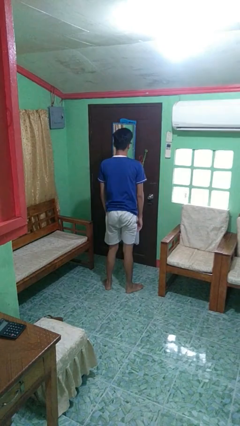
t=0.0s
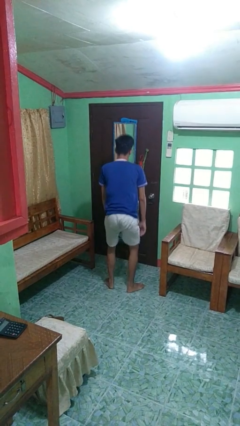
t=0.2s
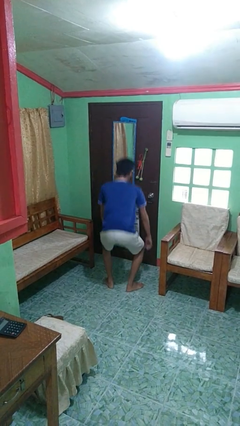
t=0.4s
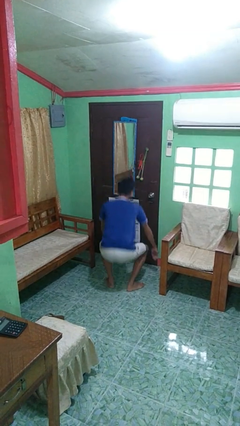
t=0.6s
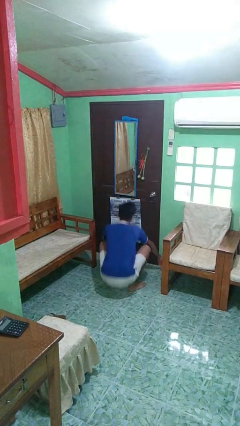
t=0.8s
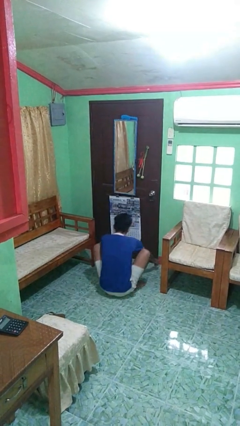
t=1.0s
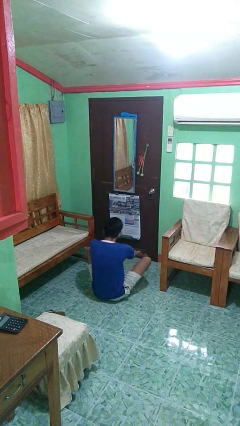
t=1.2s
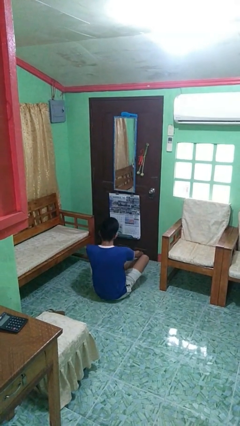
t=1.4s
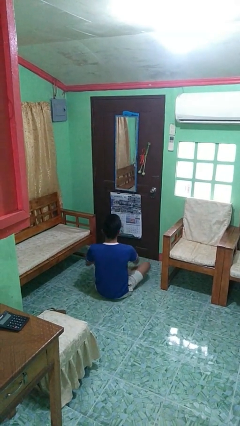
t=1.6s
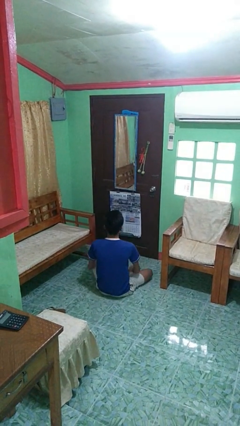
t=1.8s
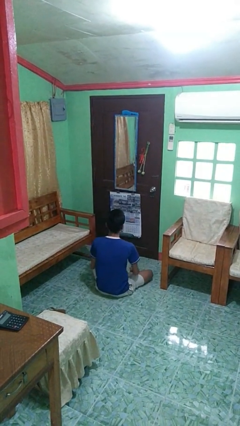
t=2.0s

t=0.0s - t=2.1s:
person sits crisscross

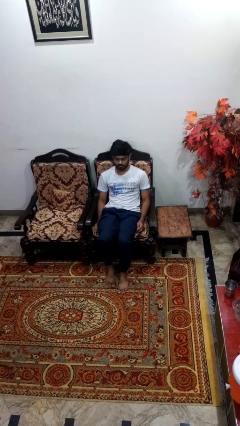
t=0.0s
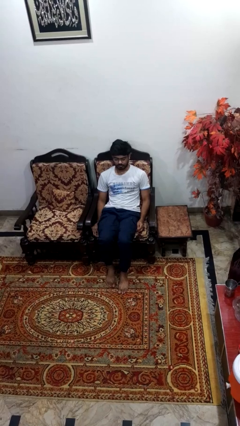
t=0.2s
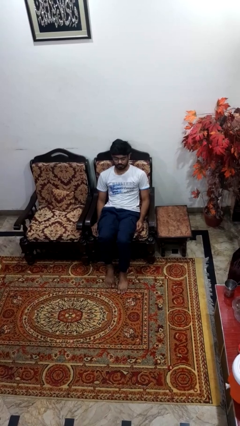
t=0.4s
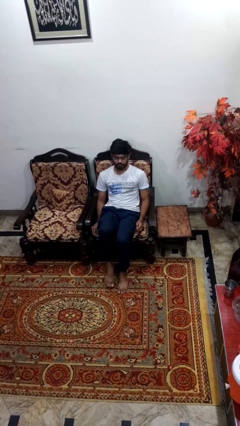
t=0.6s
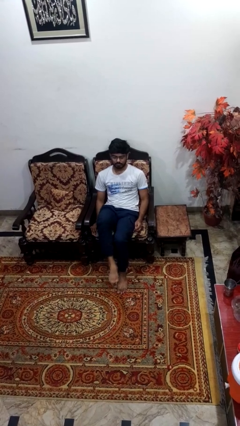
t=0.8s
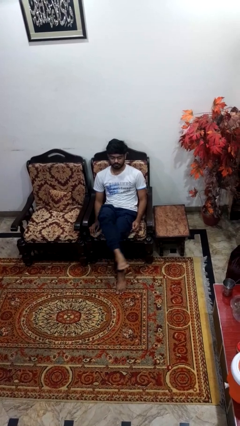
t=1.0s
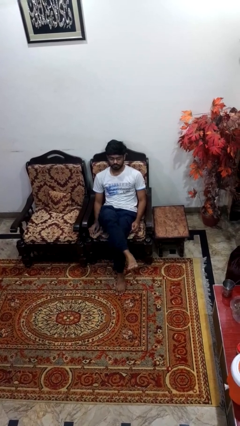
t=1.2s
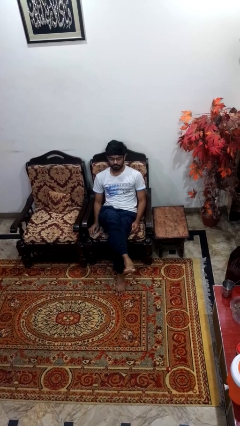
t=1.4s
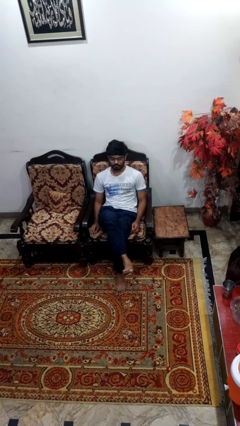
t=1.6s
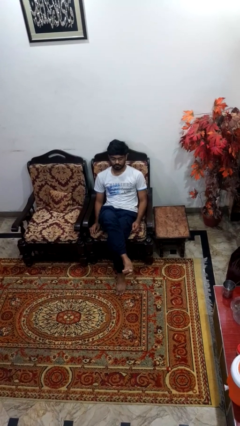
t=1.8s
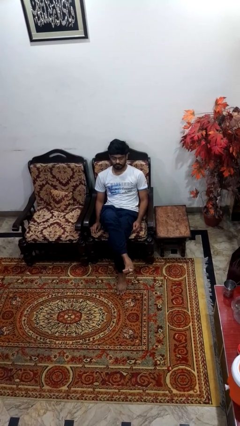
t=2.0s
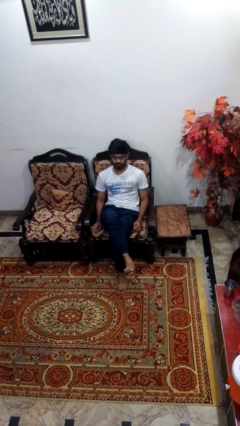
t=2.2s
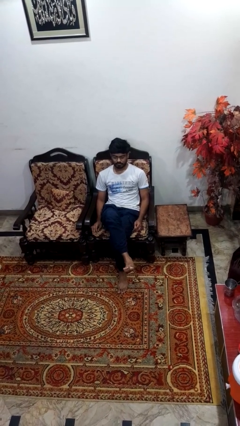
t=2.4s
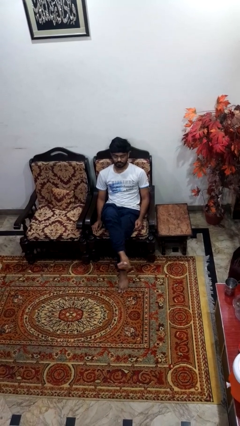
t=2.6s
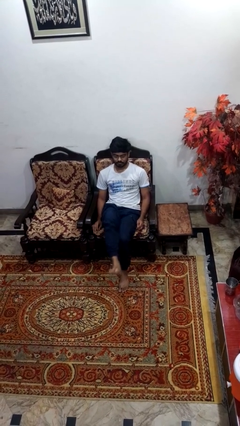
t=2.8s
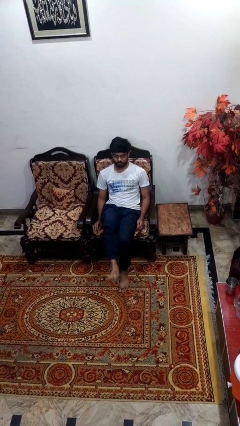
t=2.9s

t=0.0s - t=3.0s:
person crosses legs

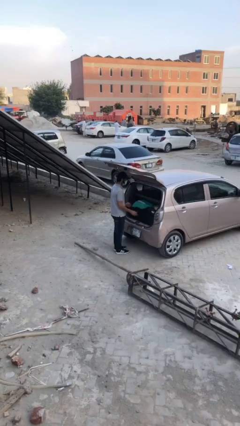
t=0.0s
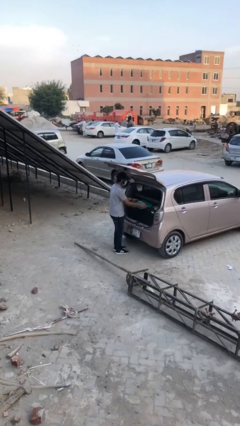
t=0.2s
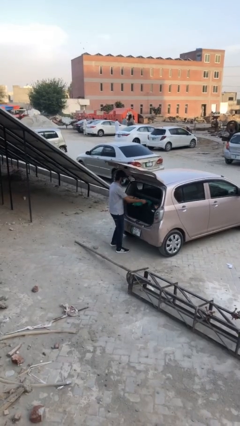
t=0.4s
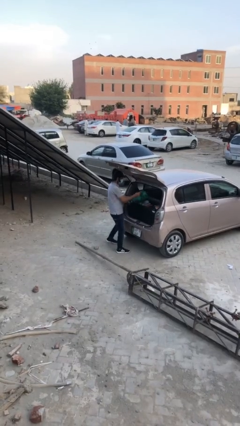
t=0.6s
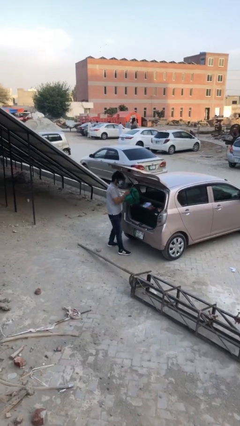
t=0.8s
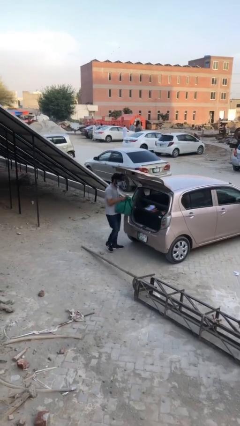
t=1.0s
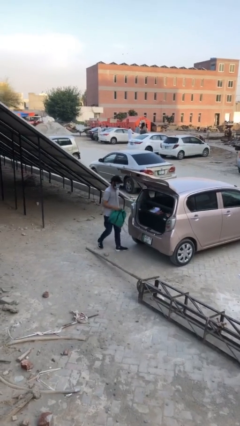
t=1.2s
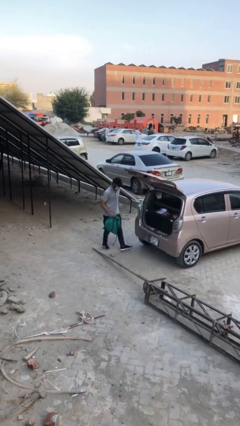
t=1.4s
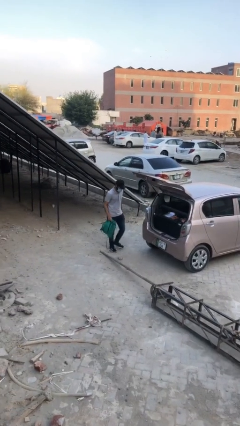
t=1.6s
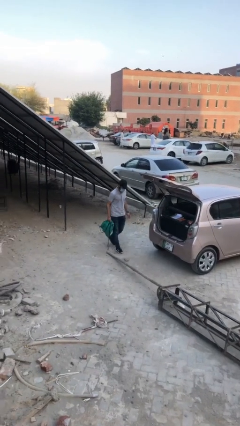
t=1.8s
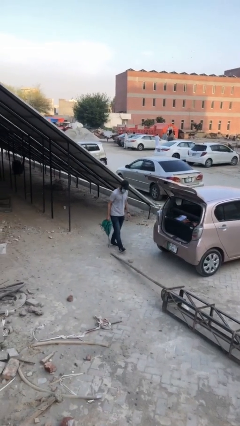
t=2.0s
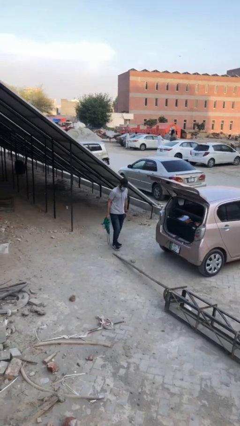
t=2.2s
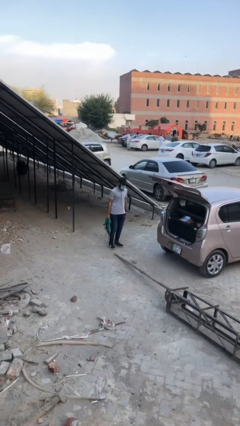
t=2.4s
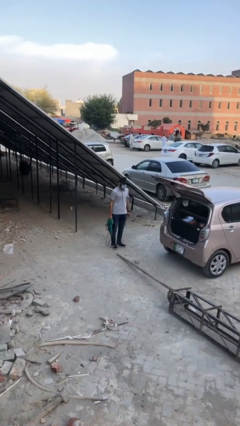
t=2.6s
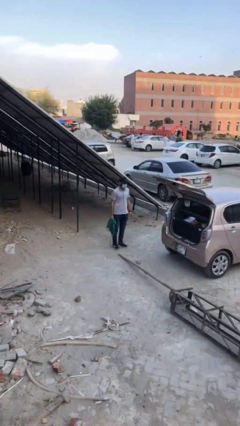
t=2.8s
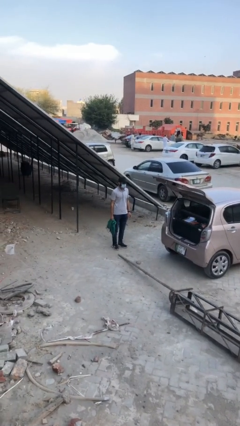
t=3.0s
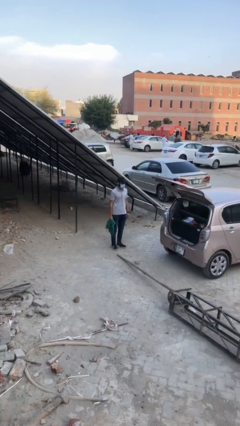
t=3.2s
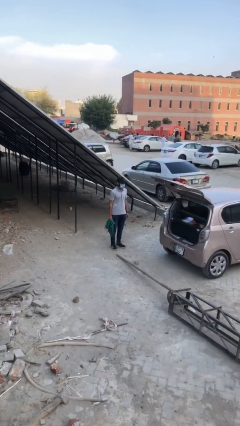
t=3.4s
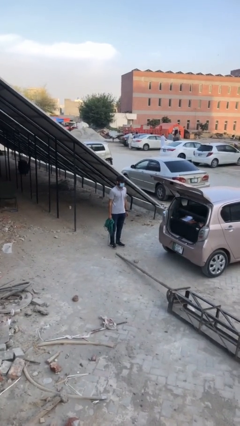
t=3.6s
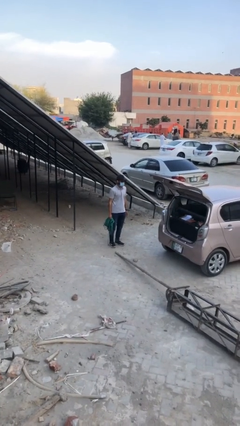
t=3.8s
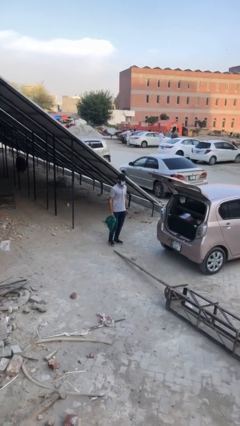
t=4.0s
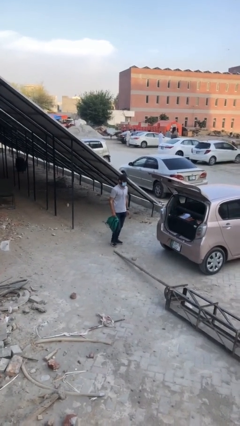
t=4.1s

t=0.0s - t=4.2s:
person unloads car

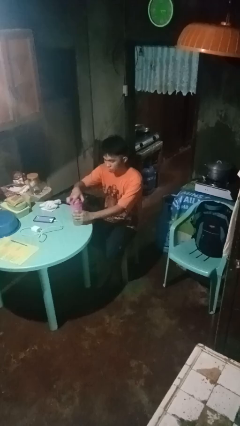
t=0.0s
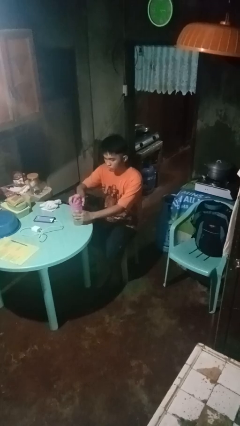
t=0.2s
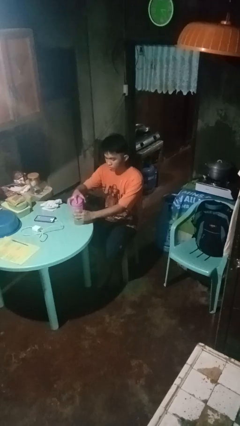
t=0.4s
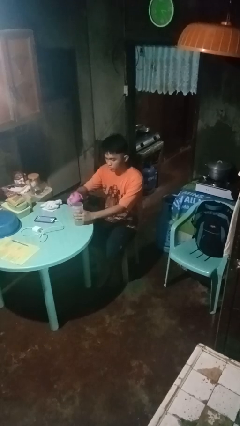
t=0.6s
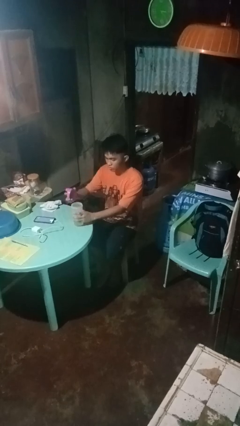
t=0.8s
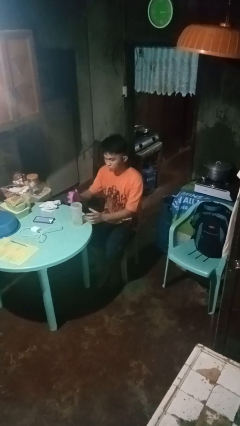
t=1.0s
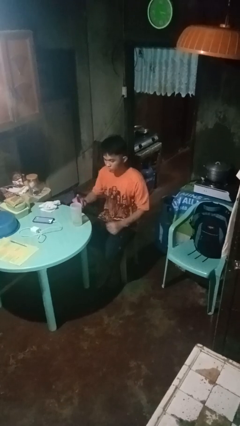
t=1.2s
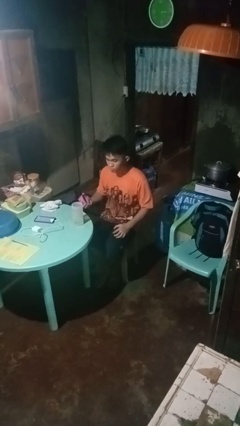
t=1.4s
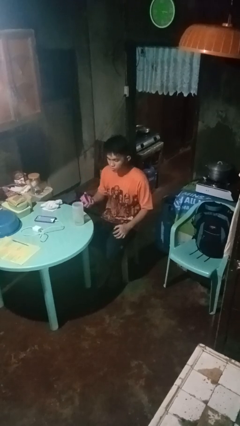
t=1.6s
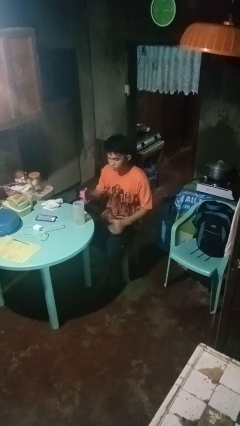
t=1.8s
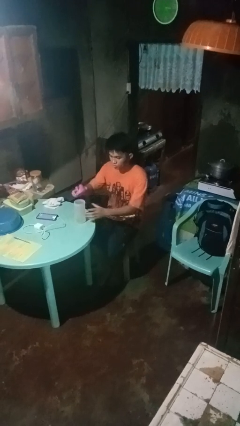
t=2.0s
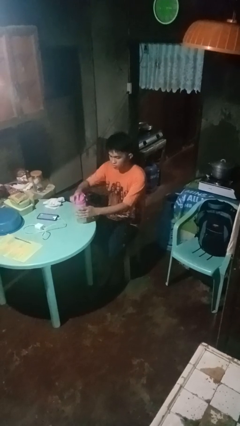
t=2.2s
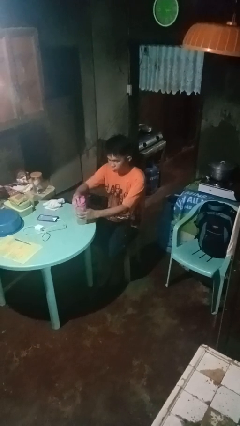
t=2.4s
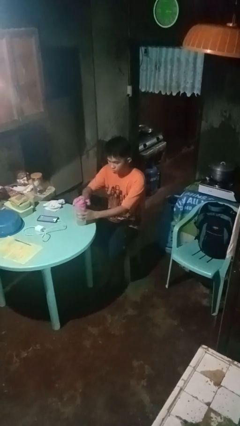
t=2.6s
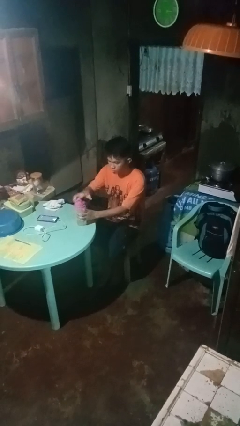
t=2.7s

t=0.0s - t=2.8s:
person unscrews lid from bottle

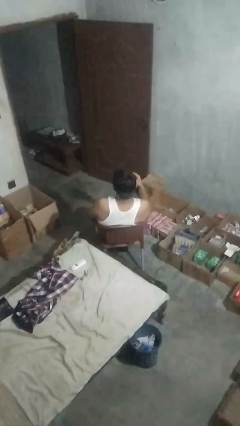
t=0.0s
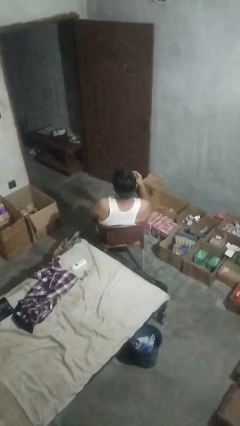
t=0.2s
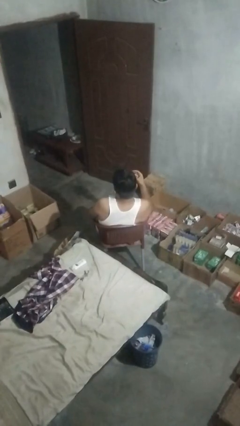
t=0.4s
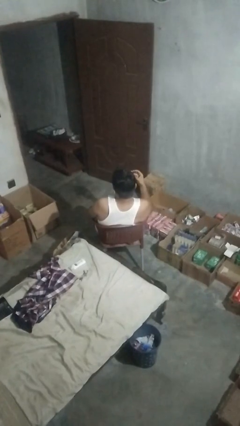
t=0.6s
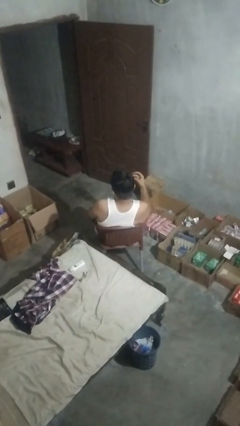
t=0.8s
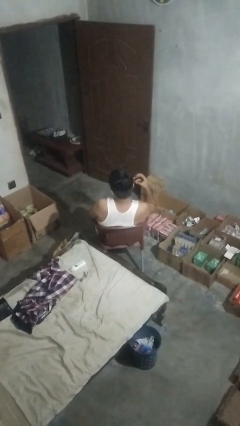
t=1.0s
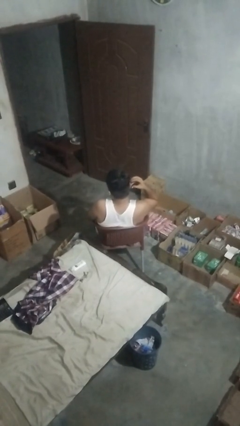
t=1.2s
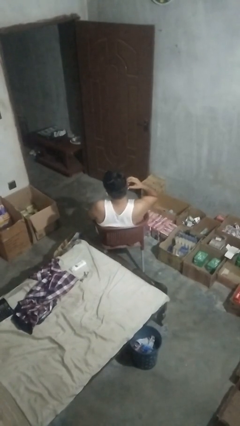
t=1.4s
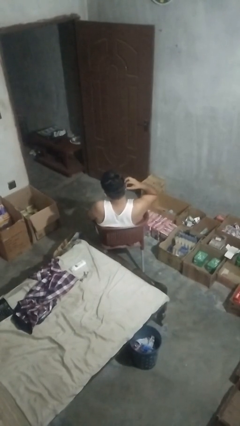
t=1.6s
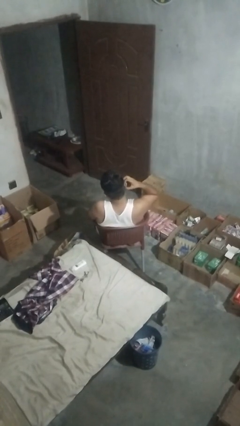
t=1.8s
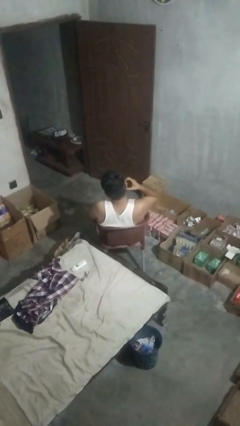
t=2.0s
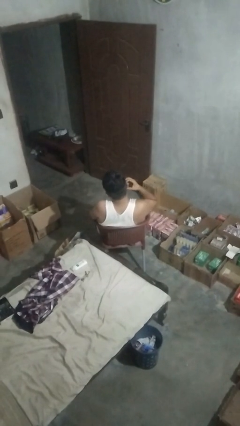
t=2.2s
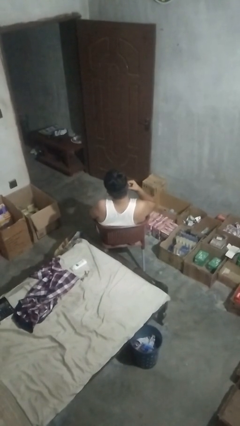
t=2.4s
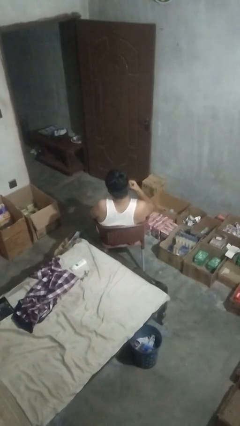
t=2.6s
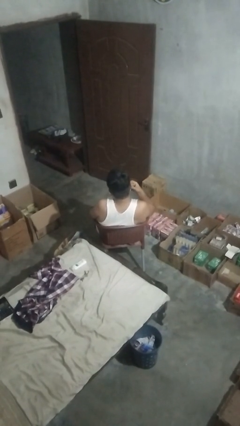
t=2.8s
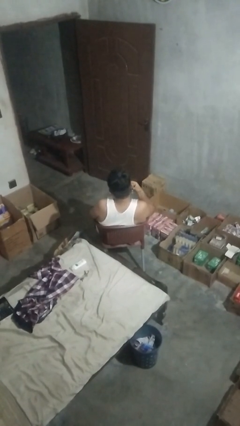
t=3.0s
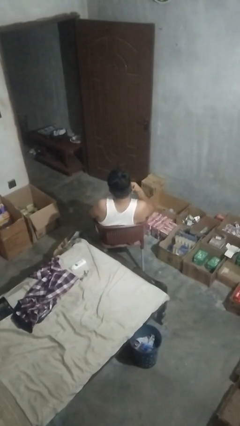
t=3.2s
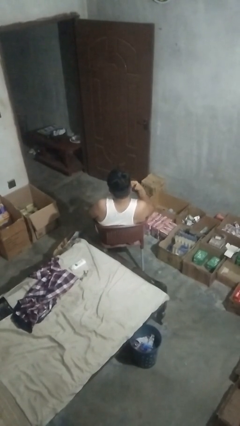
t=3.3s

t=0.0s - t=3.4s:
person puts on earrings

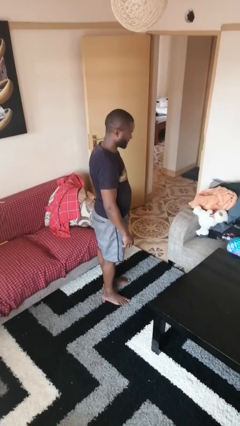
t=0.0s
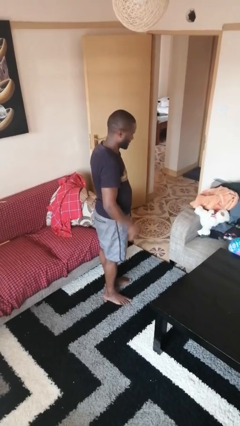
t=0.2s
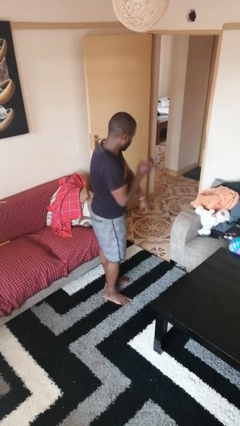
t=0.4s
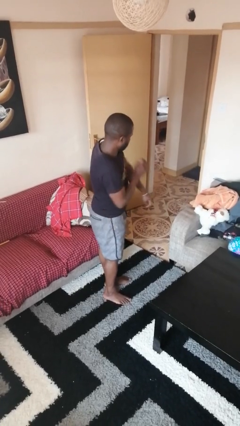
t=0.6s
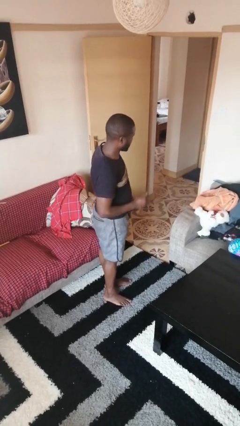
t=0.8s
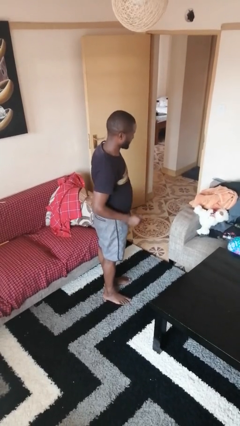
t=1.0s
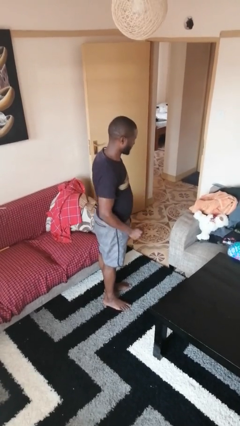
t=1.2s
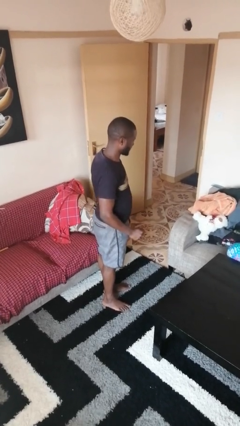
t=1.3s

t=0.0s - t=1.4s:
person swats bug

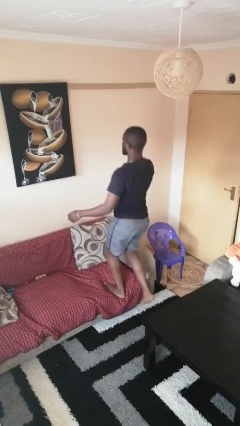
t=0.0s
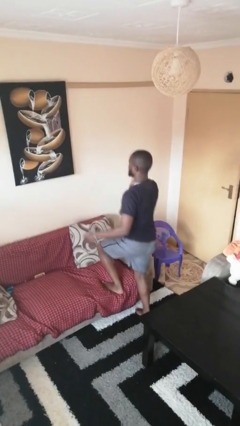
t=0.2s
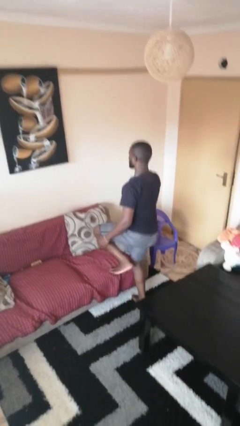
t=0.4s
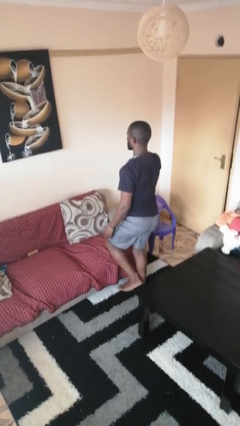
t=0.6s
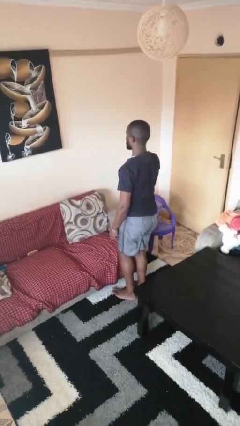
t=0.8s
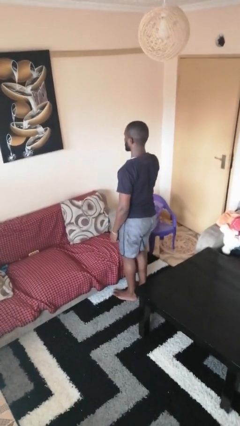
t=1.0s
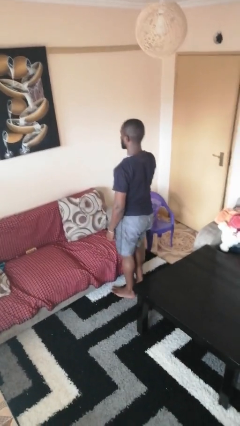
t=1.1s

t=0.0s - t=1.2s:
person climbs off couch
